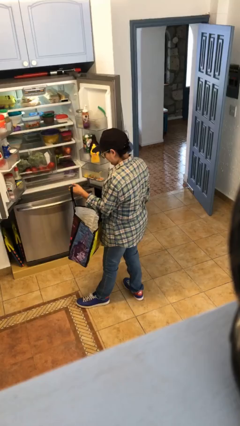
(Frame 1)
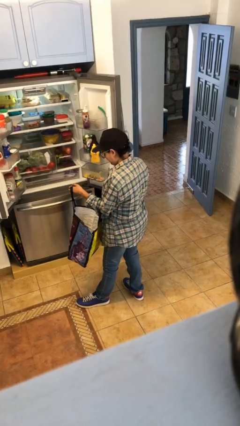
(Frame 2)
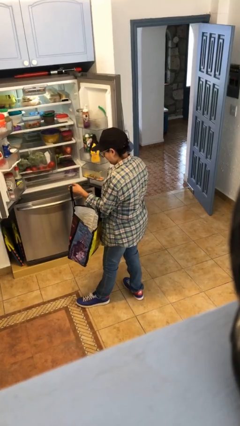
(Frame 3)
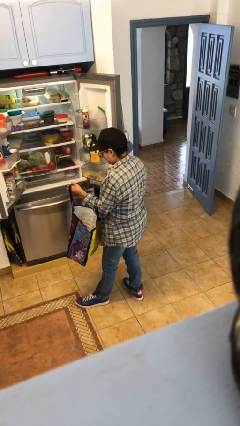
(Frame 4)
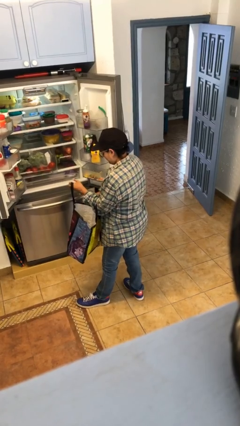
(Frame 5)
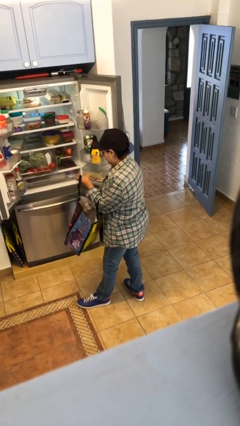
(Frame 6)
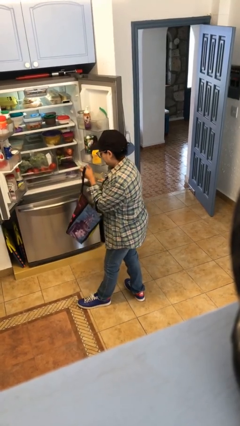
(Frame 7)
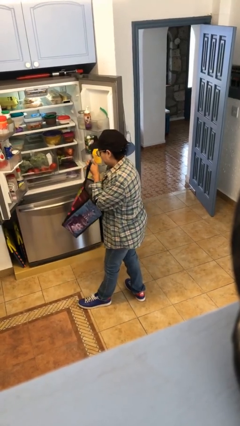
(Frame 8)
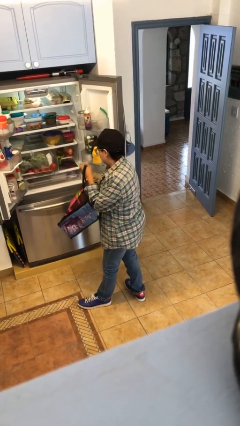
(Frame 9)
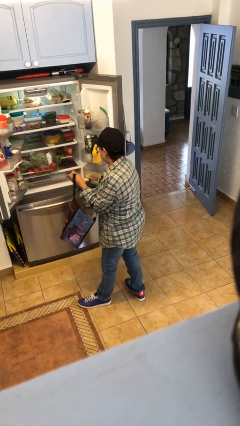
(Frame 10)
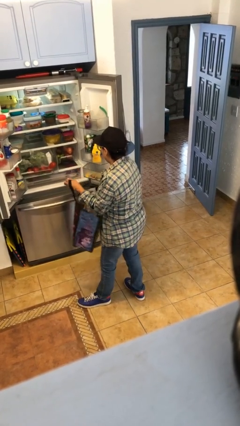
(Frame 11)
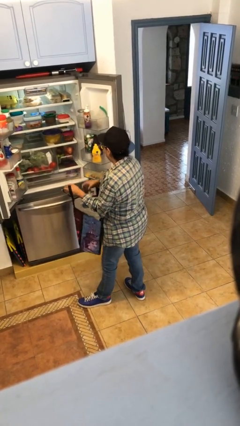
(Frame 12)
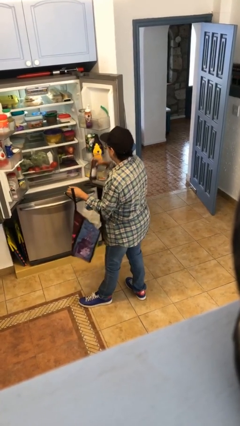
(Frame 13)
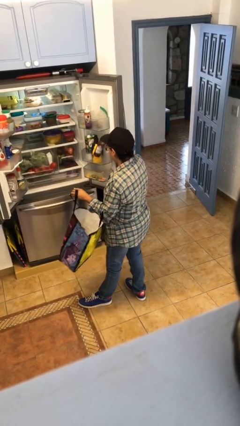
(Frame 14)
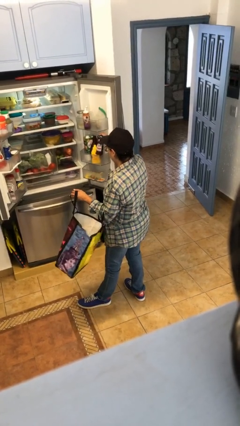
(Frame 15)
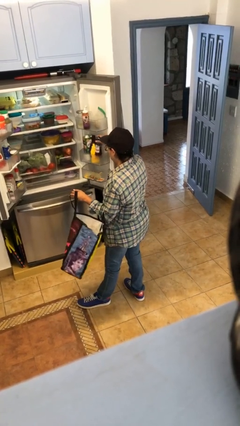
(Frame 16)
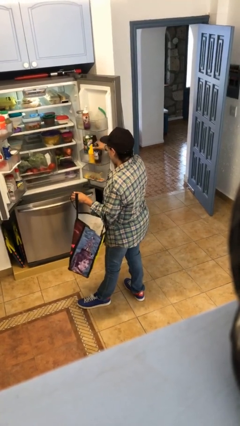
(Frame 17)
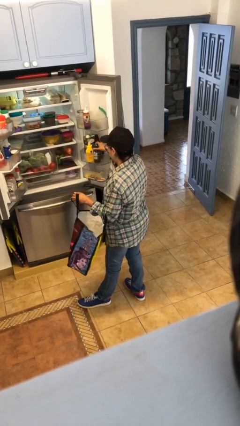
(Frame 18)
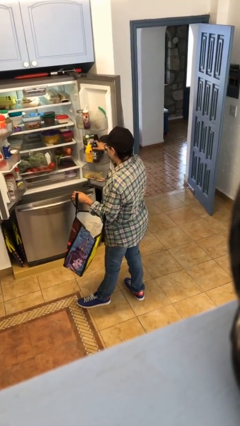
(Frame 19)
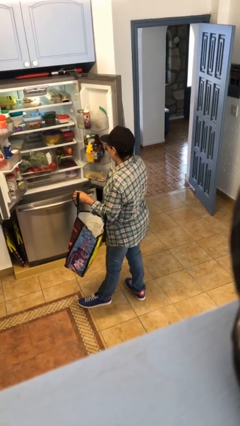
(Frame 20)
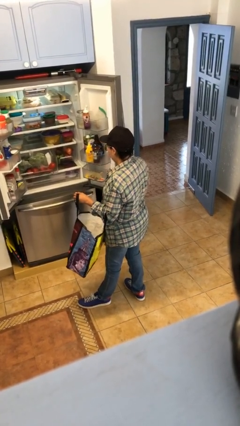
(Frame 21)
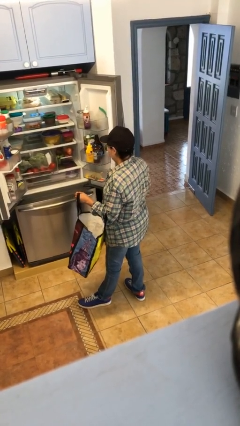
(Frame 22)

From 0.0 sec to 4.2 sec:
person loads groceries into refrigerator

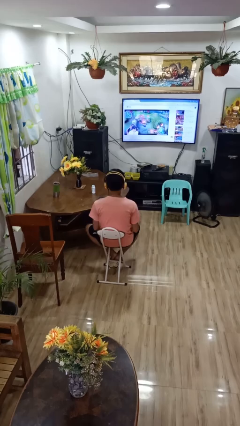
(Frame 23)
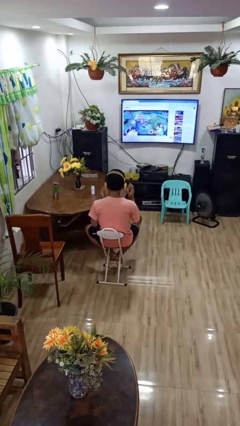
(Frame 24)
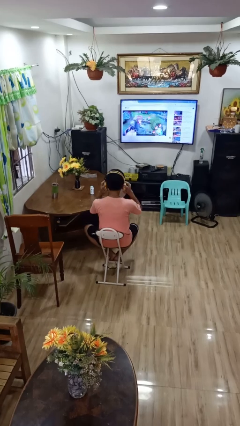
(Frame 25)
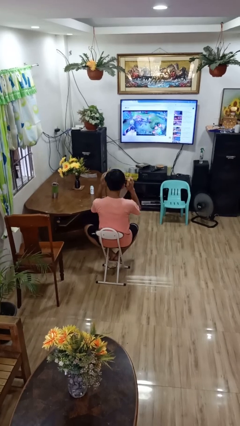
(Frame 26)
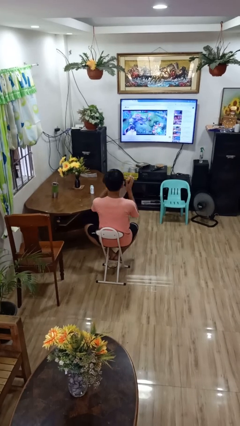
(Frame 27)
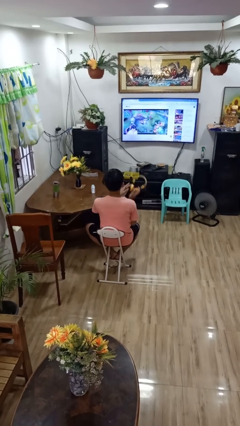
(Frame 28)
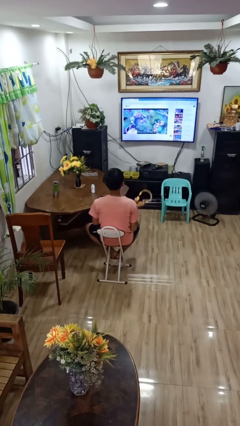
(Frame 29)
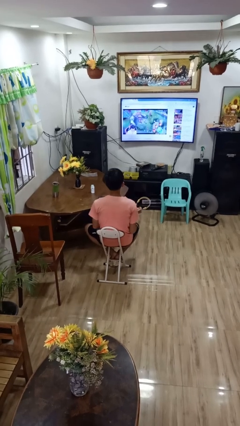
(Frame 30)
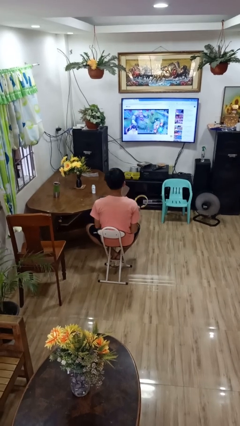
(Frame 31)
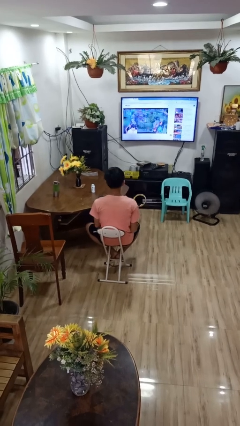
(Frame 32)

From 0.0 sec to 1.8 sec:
person takes off headphones

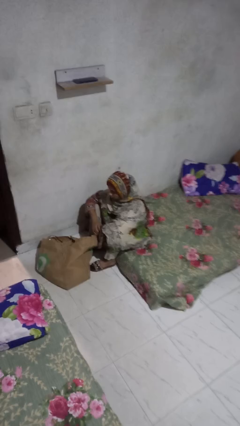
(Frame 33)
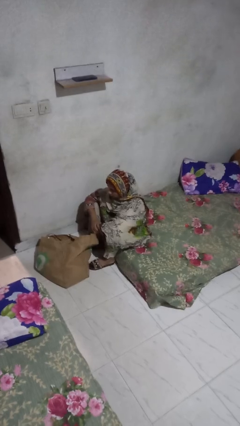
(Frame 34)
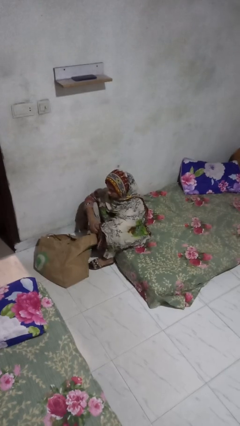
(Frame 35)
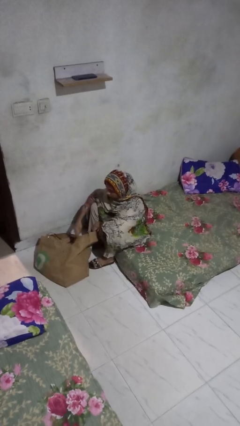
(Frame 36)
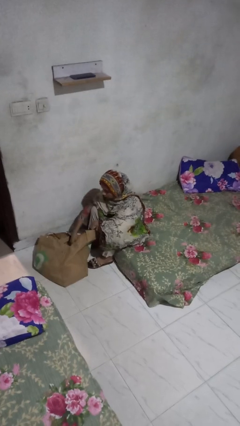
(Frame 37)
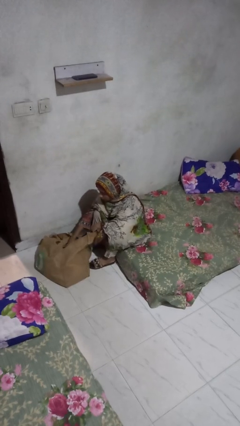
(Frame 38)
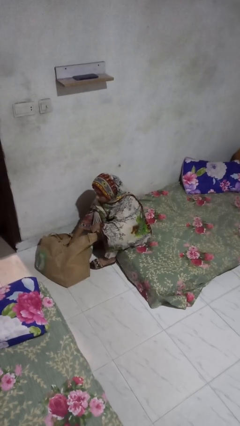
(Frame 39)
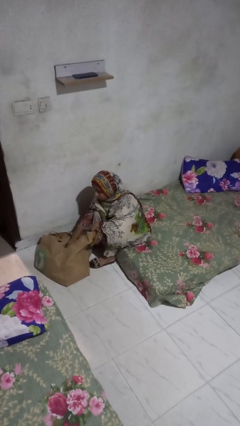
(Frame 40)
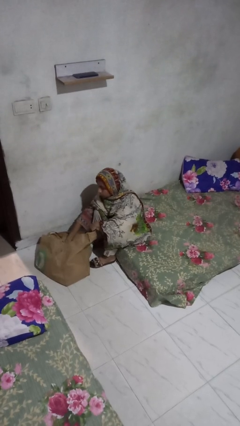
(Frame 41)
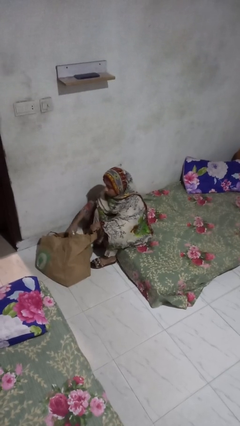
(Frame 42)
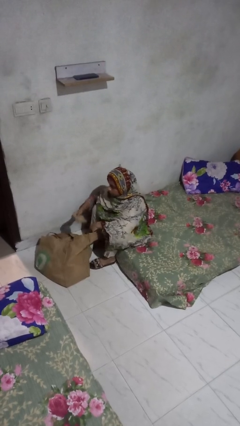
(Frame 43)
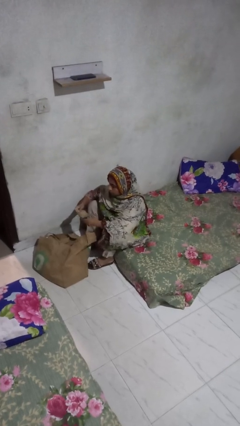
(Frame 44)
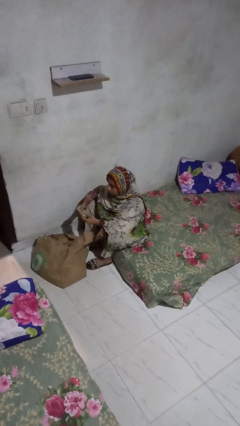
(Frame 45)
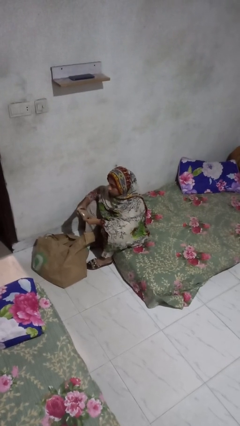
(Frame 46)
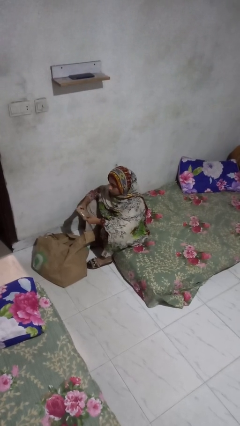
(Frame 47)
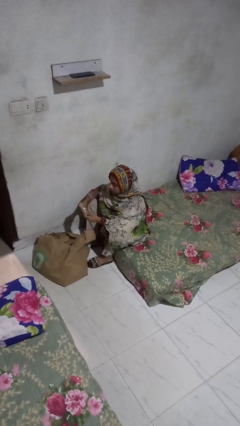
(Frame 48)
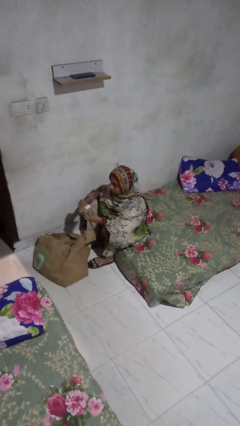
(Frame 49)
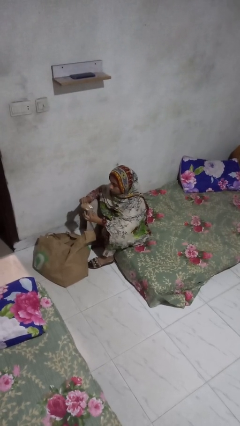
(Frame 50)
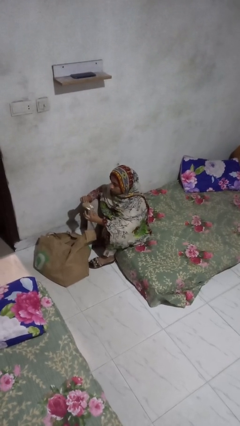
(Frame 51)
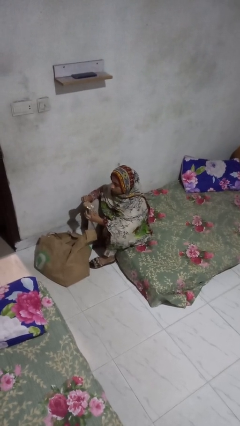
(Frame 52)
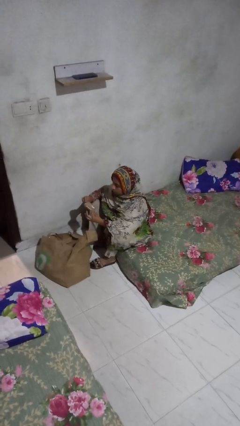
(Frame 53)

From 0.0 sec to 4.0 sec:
person takes object from bag

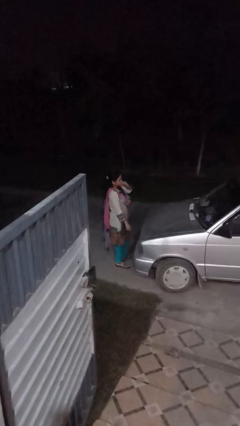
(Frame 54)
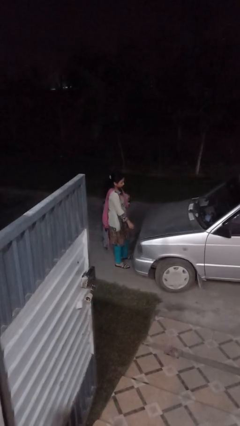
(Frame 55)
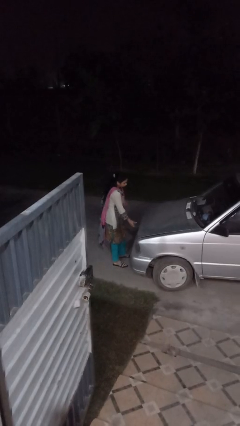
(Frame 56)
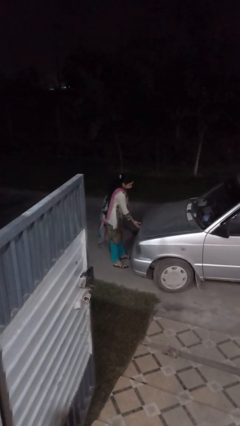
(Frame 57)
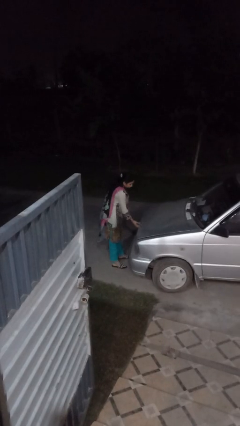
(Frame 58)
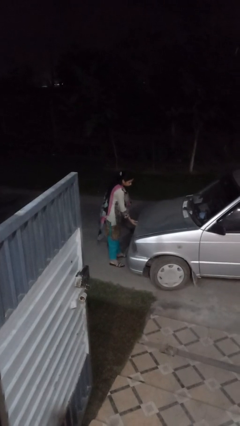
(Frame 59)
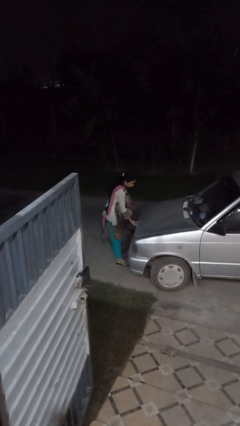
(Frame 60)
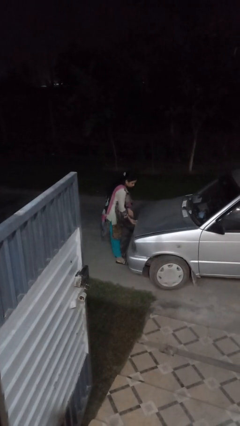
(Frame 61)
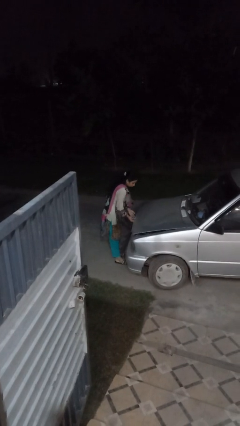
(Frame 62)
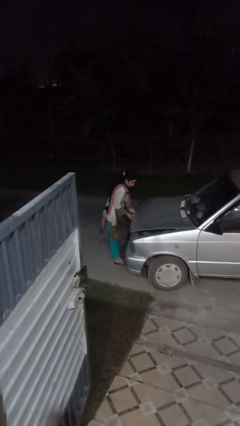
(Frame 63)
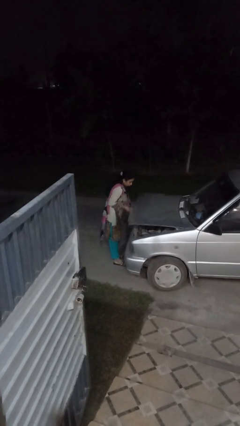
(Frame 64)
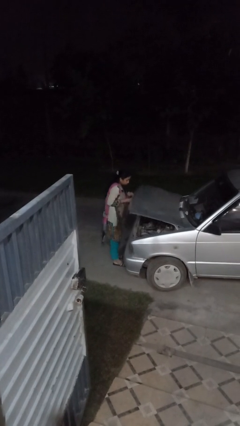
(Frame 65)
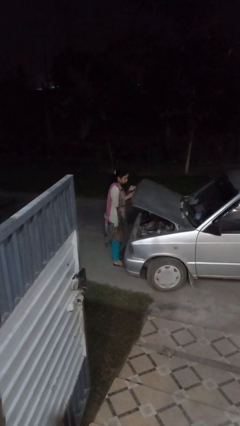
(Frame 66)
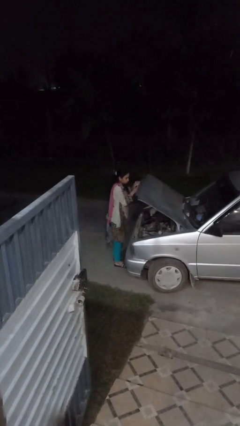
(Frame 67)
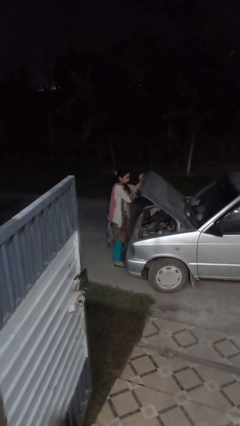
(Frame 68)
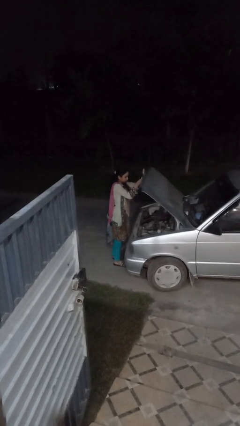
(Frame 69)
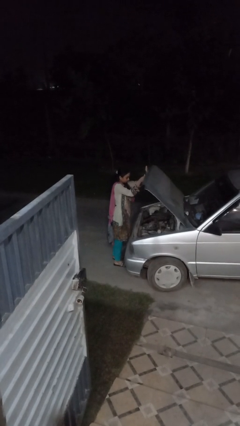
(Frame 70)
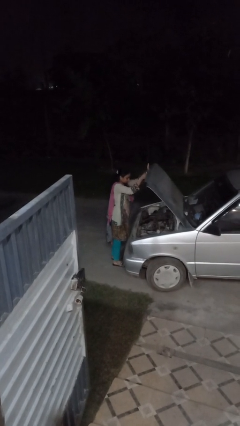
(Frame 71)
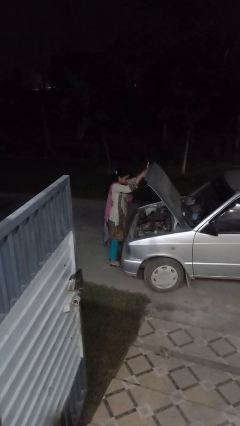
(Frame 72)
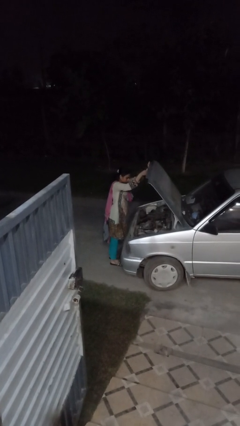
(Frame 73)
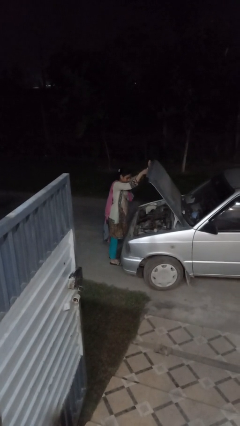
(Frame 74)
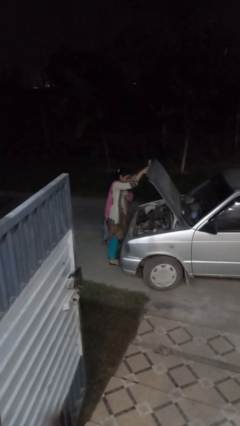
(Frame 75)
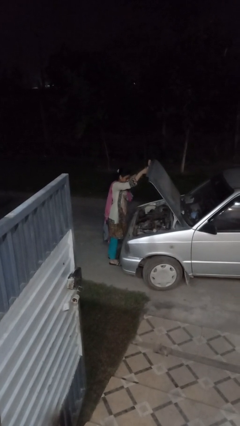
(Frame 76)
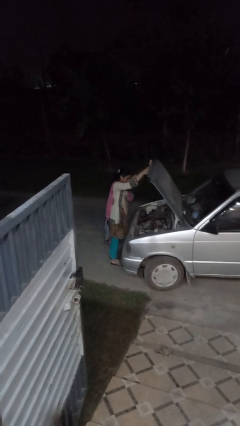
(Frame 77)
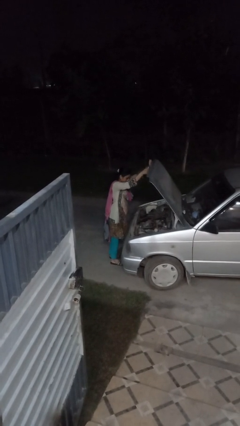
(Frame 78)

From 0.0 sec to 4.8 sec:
person opens car hood

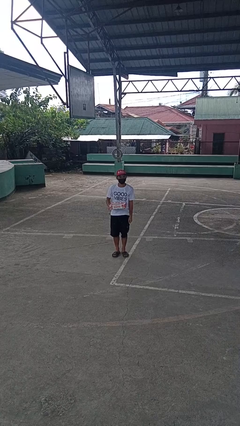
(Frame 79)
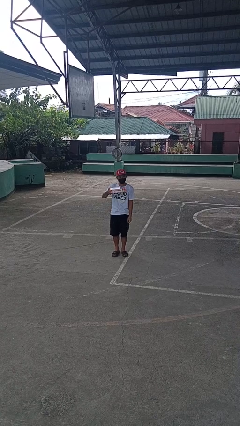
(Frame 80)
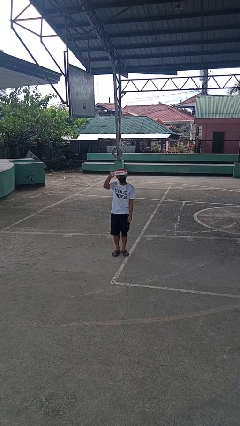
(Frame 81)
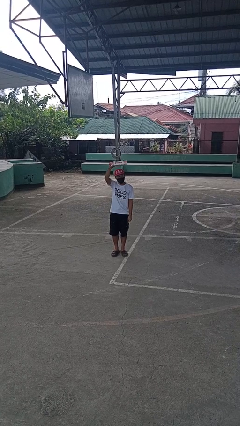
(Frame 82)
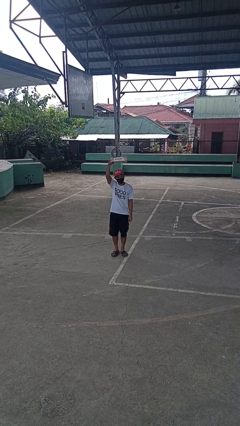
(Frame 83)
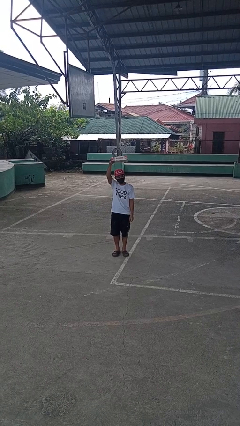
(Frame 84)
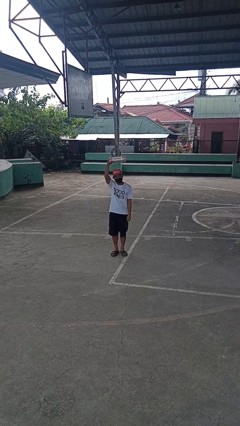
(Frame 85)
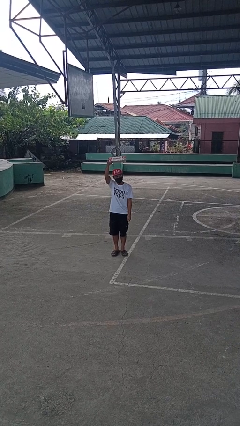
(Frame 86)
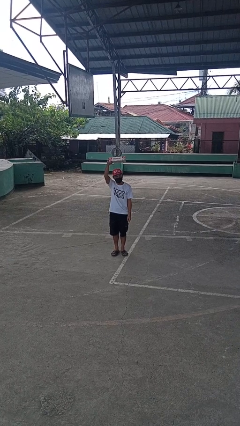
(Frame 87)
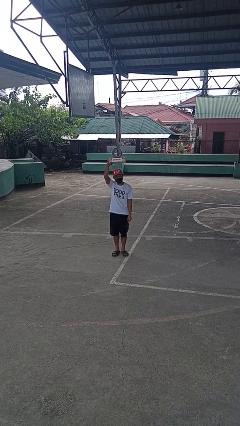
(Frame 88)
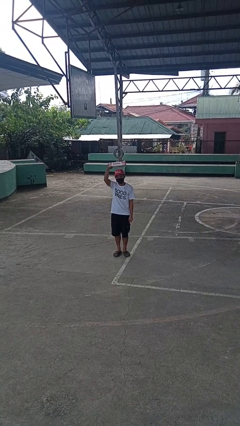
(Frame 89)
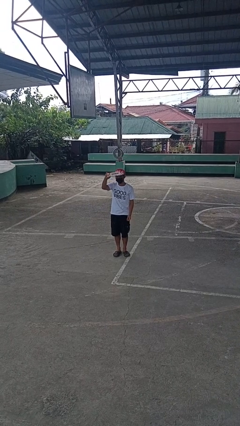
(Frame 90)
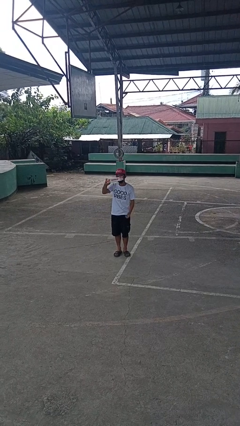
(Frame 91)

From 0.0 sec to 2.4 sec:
person holds object above head
